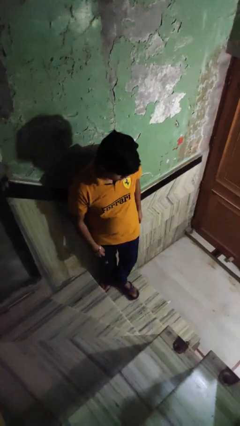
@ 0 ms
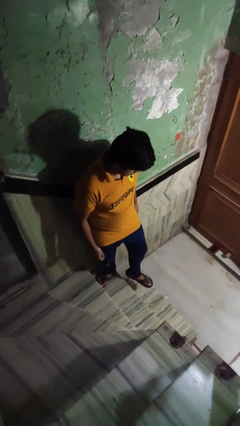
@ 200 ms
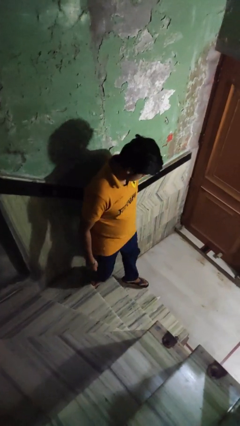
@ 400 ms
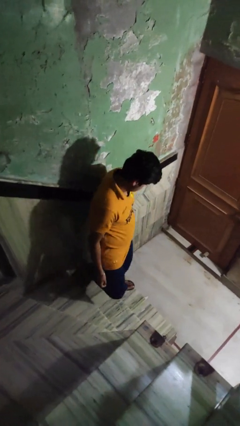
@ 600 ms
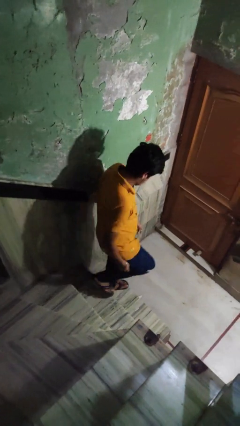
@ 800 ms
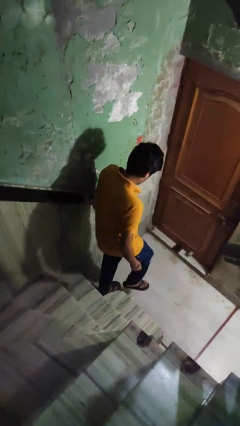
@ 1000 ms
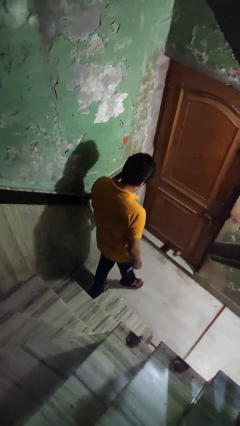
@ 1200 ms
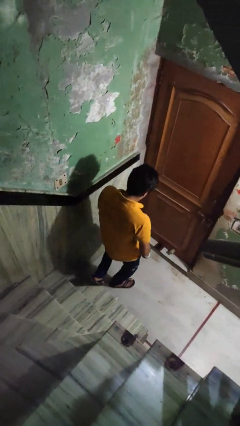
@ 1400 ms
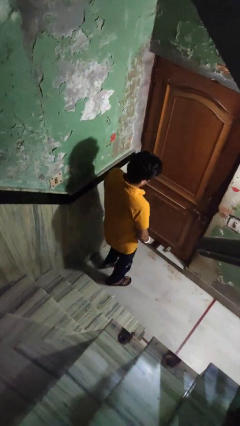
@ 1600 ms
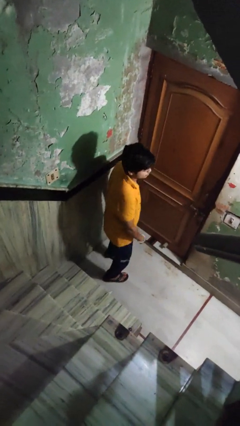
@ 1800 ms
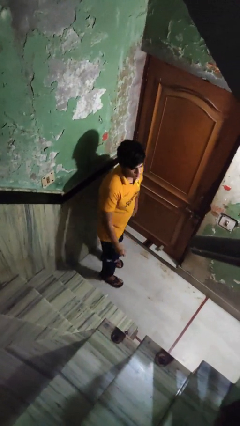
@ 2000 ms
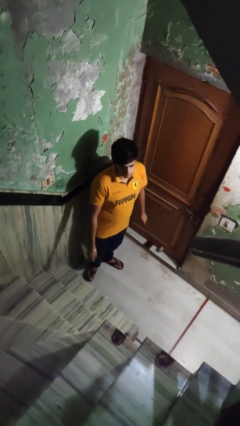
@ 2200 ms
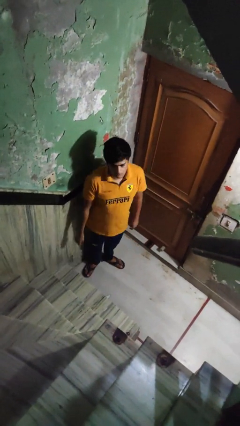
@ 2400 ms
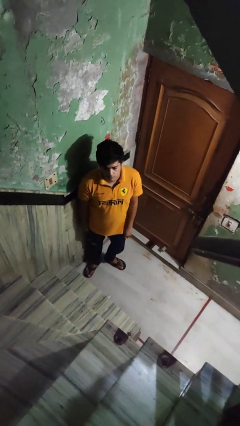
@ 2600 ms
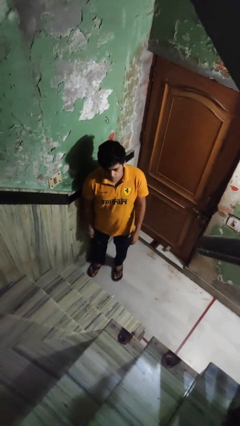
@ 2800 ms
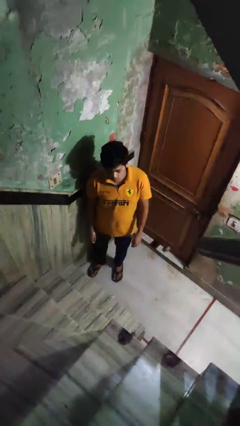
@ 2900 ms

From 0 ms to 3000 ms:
person climbs down stairs

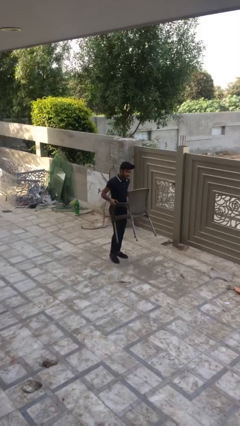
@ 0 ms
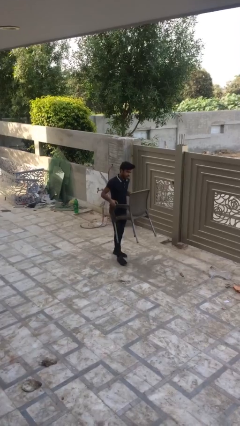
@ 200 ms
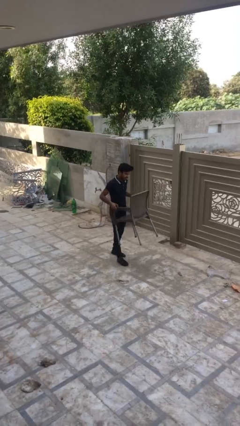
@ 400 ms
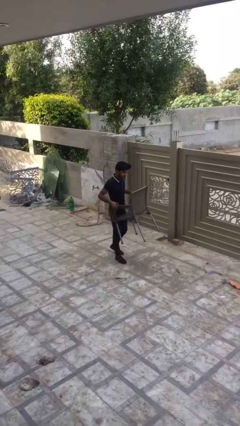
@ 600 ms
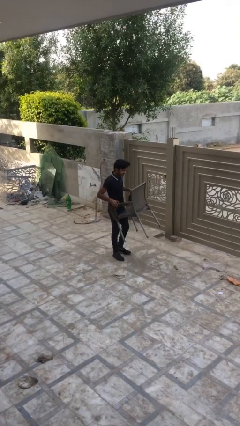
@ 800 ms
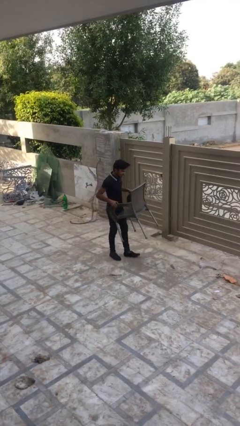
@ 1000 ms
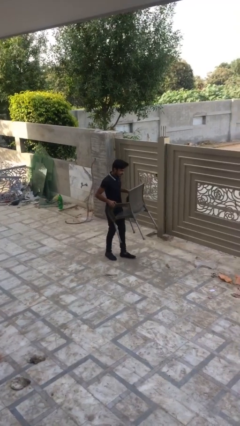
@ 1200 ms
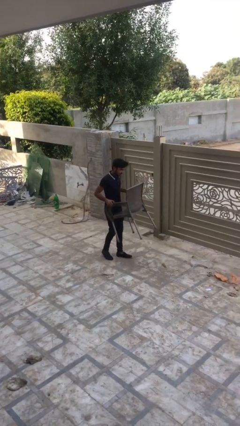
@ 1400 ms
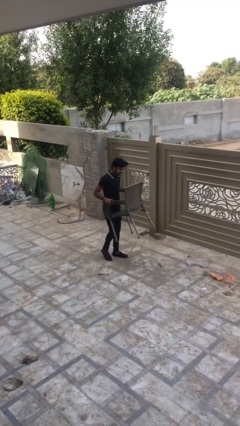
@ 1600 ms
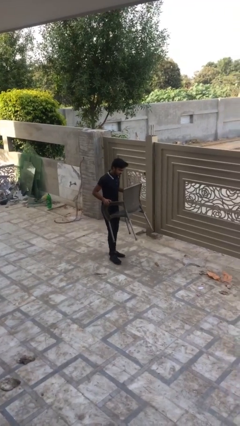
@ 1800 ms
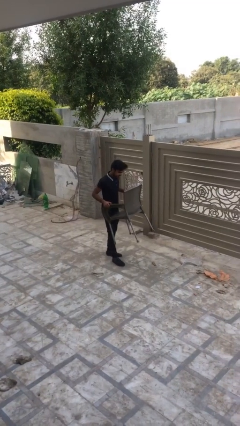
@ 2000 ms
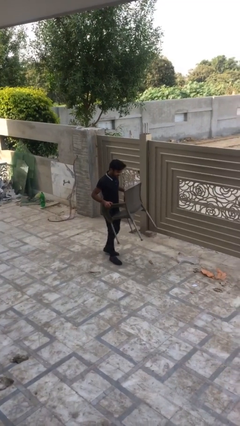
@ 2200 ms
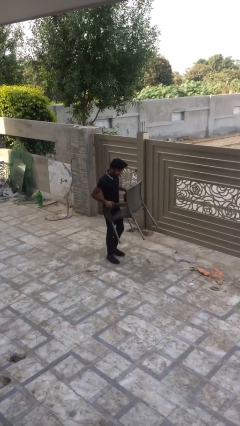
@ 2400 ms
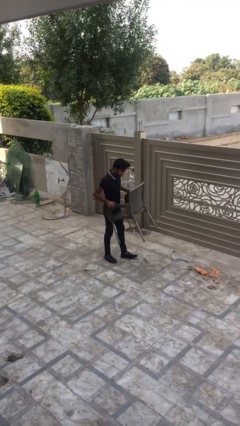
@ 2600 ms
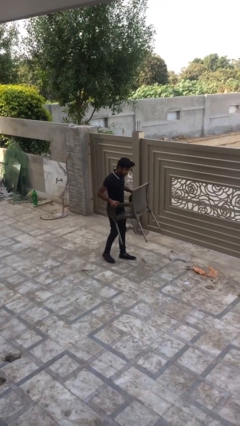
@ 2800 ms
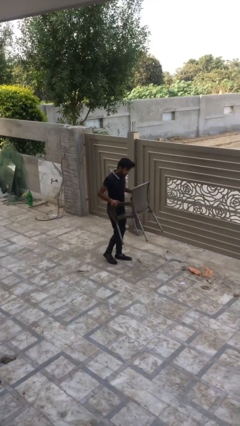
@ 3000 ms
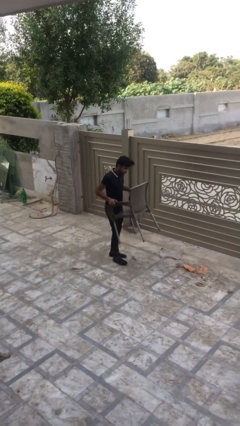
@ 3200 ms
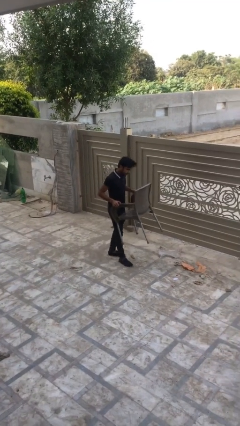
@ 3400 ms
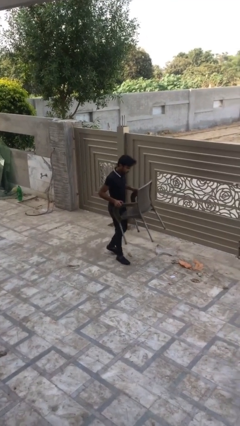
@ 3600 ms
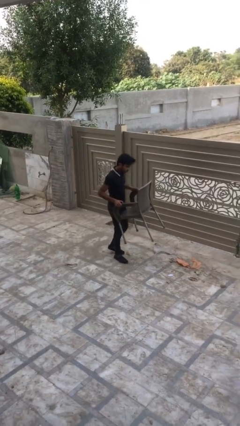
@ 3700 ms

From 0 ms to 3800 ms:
person carries heavy object

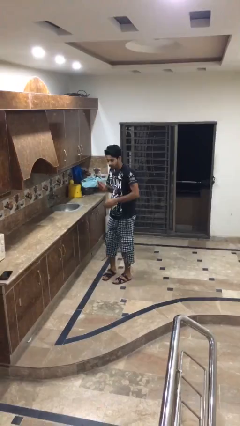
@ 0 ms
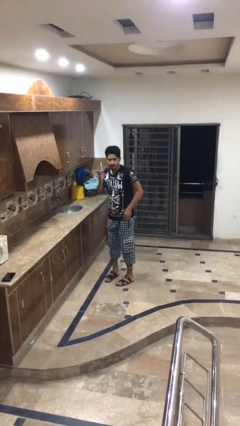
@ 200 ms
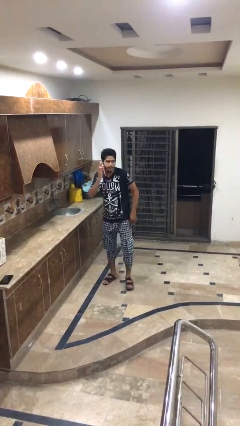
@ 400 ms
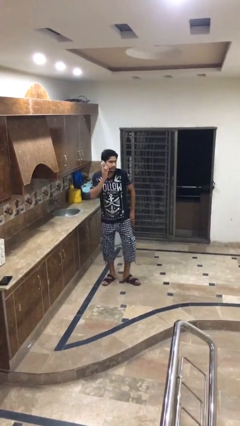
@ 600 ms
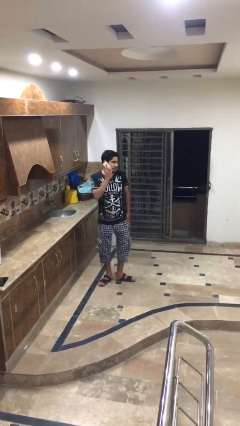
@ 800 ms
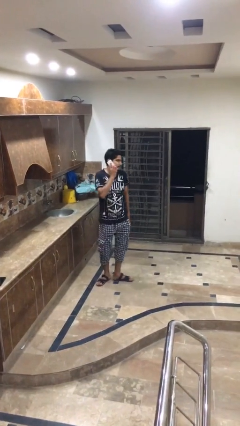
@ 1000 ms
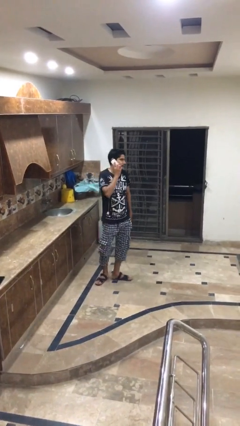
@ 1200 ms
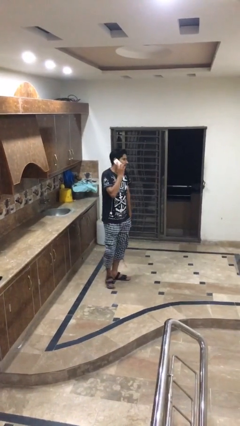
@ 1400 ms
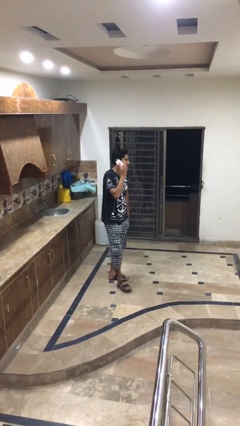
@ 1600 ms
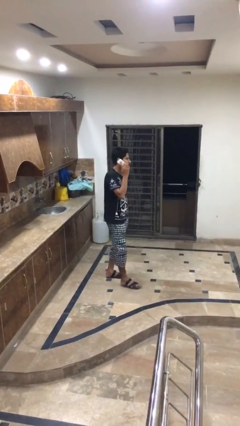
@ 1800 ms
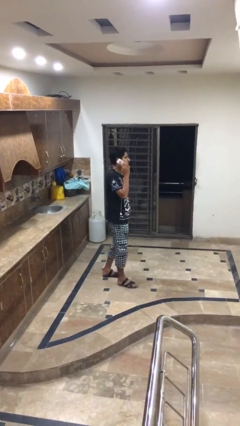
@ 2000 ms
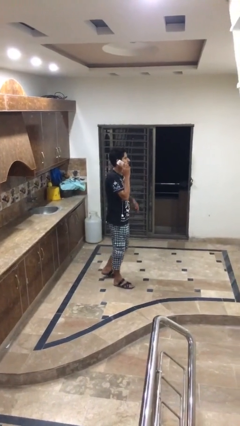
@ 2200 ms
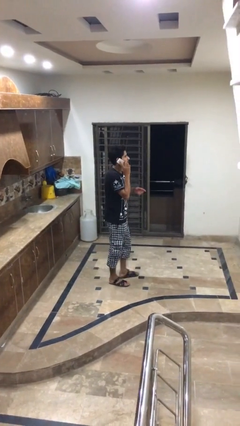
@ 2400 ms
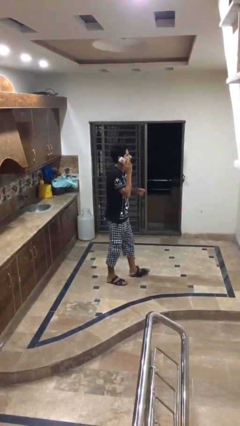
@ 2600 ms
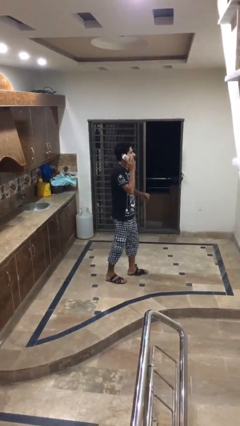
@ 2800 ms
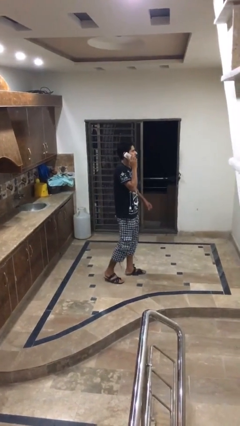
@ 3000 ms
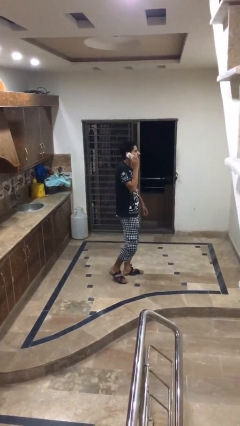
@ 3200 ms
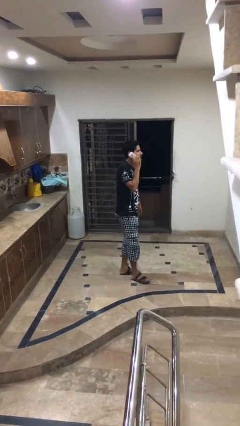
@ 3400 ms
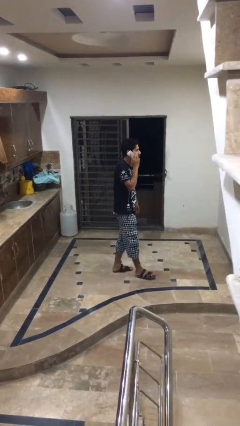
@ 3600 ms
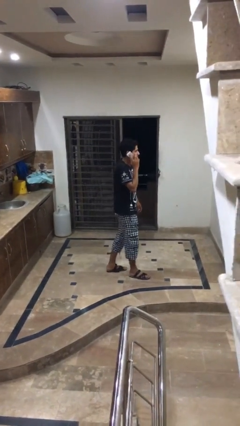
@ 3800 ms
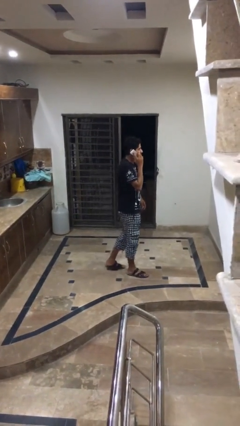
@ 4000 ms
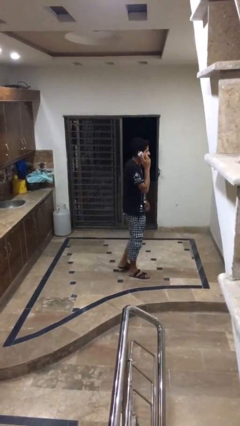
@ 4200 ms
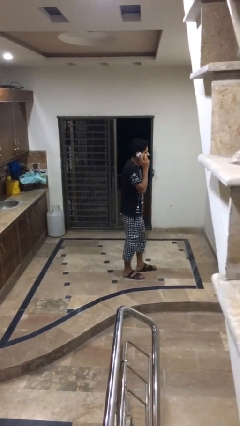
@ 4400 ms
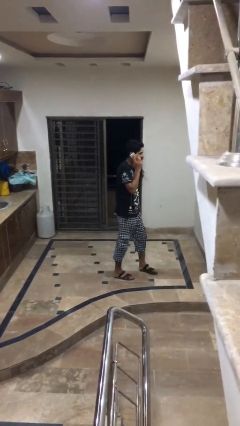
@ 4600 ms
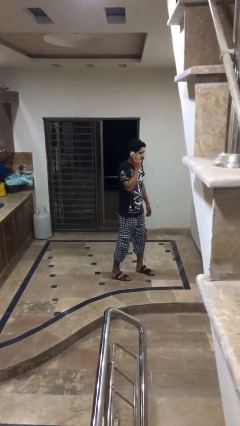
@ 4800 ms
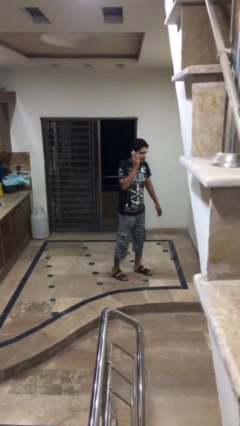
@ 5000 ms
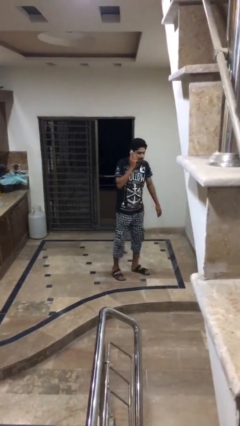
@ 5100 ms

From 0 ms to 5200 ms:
person talks on phone

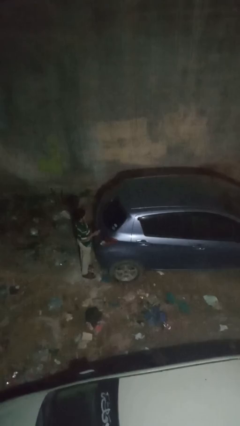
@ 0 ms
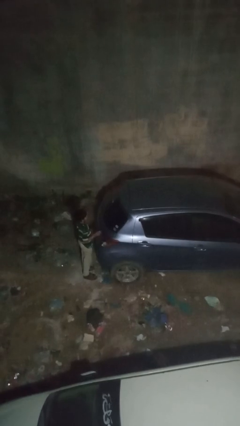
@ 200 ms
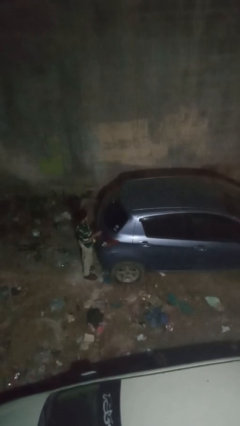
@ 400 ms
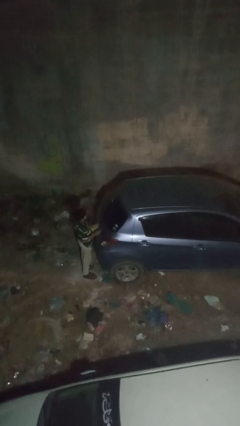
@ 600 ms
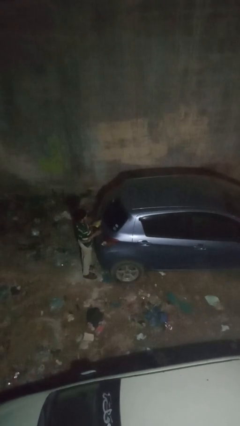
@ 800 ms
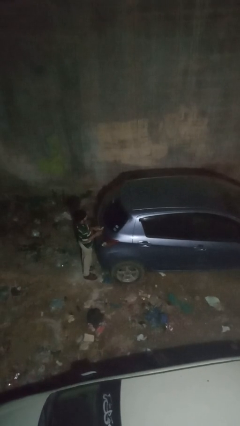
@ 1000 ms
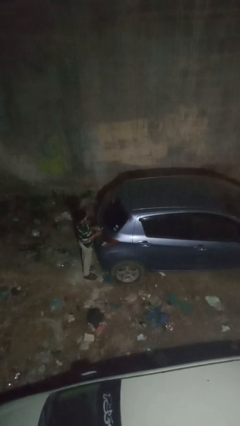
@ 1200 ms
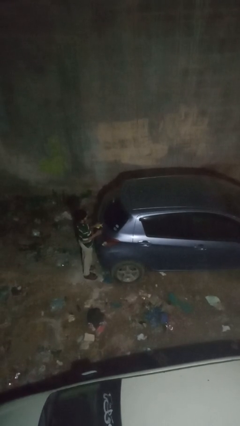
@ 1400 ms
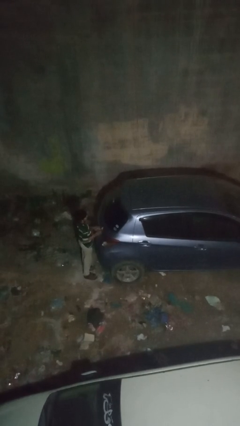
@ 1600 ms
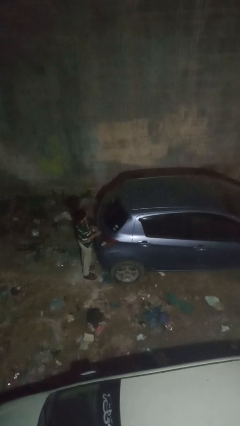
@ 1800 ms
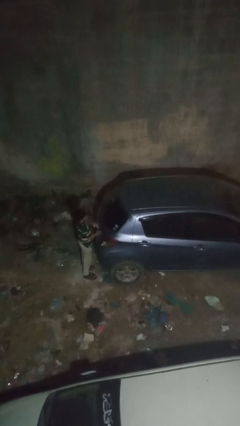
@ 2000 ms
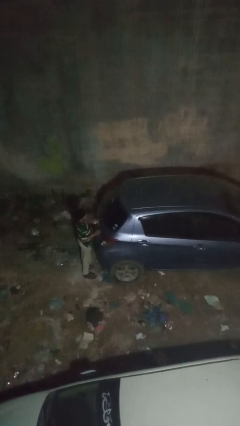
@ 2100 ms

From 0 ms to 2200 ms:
person polishes car with rag

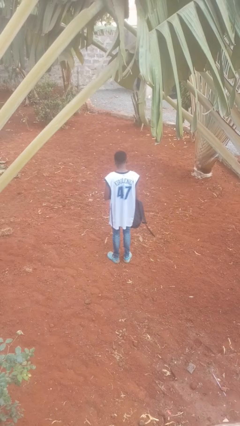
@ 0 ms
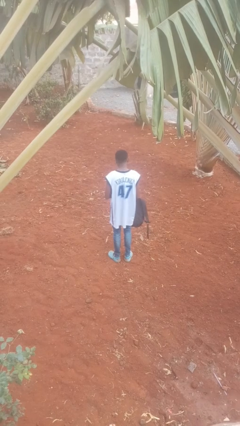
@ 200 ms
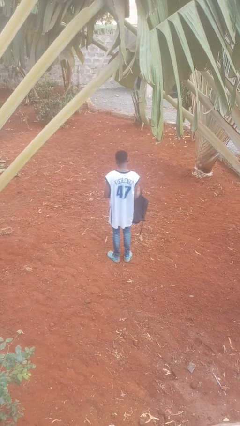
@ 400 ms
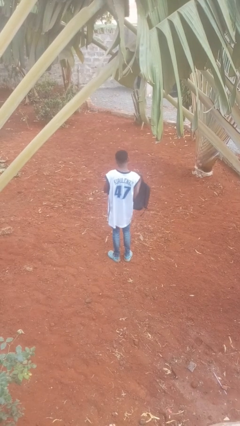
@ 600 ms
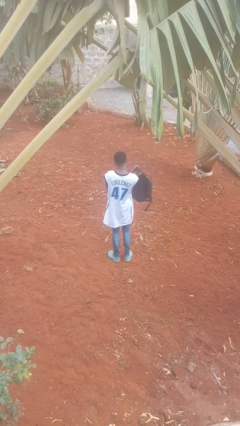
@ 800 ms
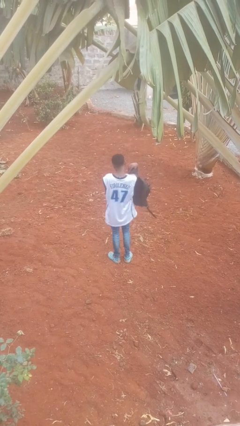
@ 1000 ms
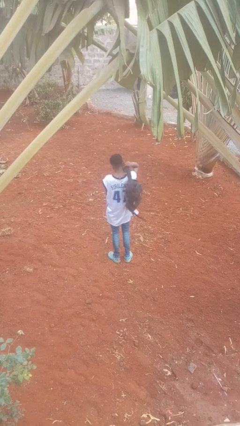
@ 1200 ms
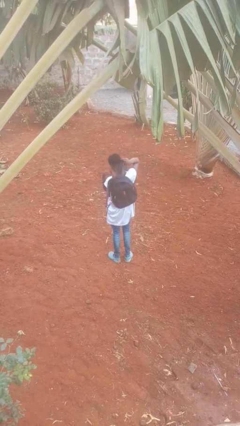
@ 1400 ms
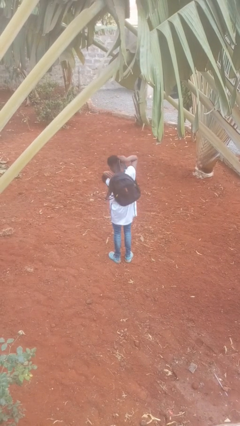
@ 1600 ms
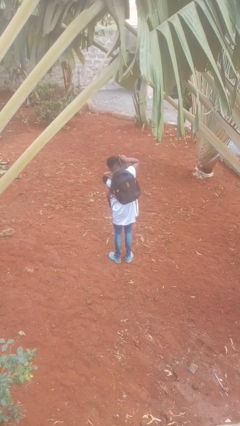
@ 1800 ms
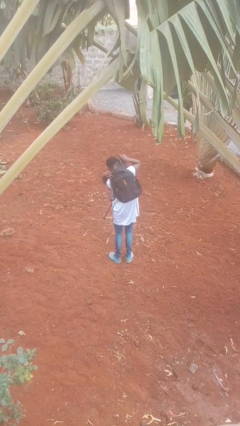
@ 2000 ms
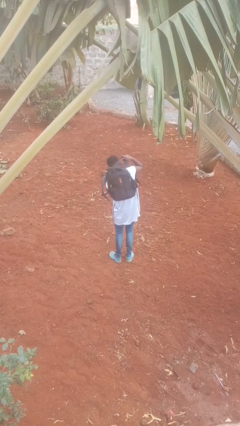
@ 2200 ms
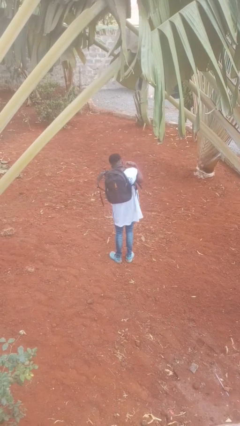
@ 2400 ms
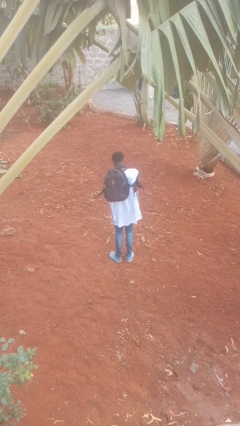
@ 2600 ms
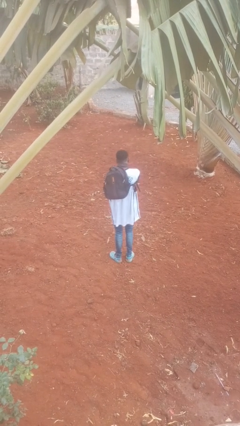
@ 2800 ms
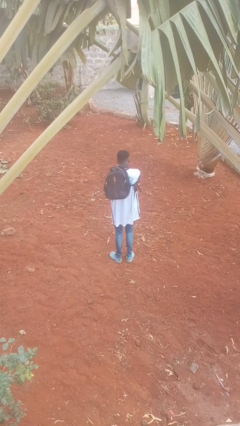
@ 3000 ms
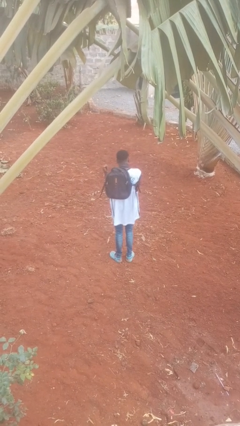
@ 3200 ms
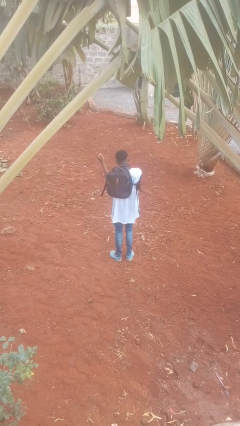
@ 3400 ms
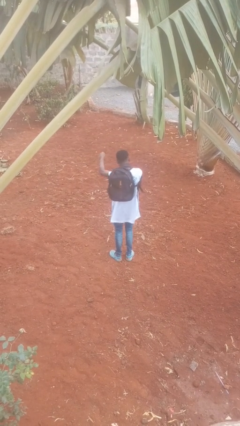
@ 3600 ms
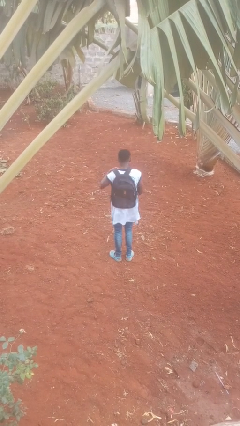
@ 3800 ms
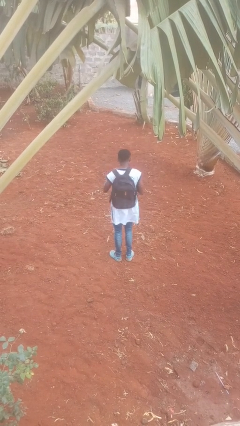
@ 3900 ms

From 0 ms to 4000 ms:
person puts on backpack
